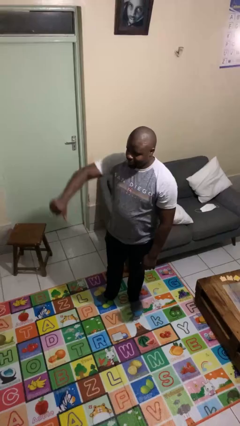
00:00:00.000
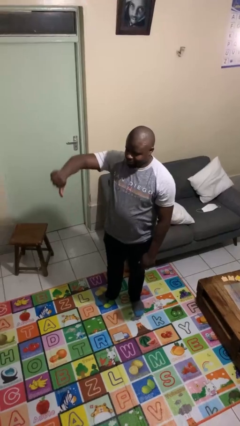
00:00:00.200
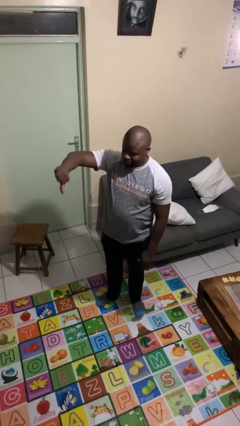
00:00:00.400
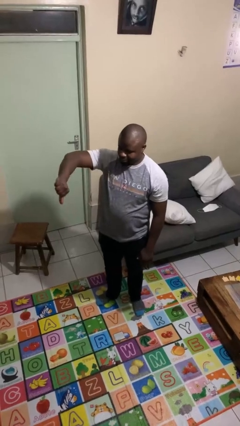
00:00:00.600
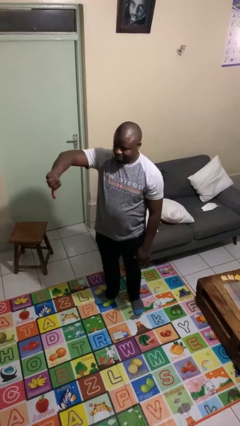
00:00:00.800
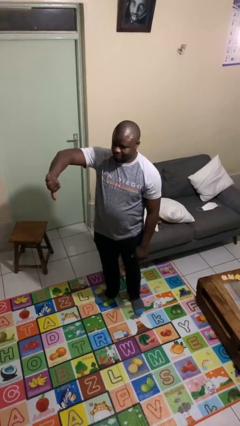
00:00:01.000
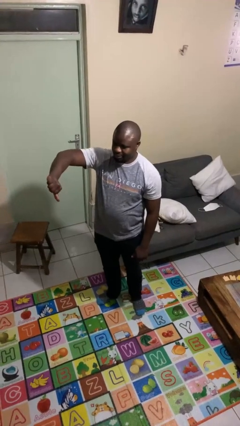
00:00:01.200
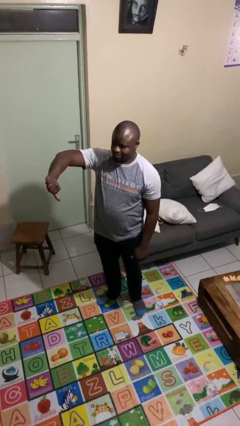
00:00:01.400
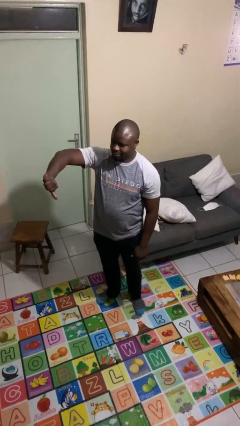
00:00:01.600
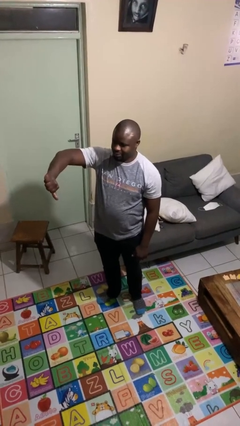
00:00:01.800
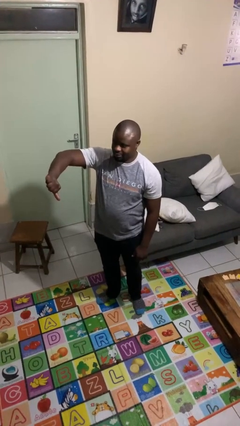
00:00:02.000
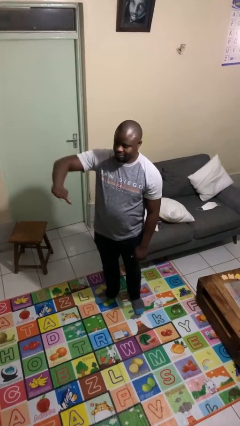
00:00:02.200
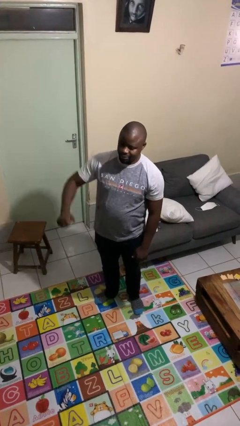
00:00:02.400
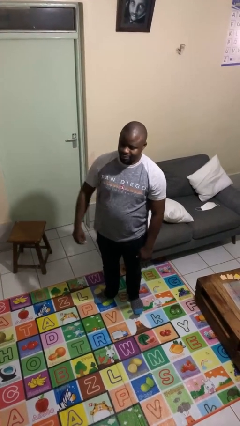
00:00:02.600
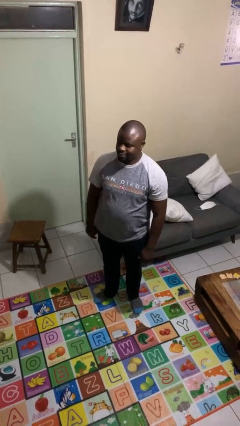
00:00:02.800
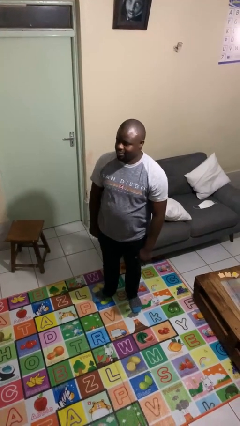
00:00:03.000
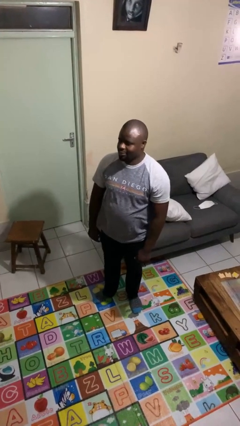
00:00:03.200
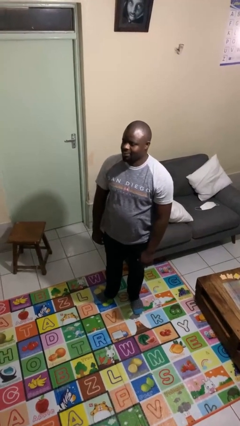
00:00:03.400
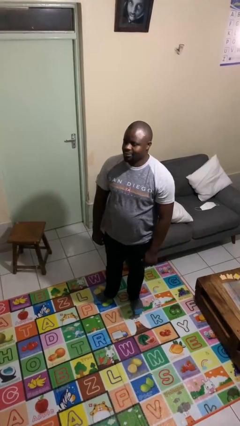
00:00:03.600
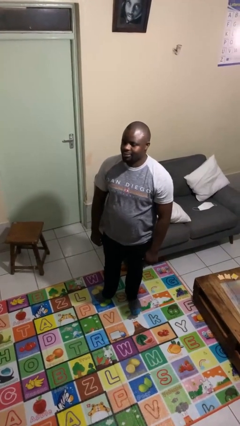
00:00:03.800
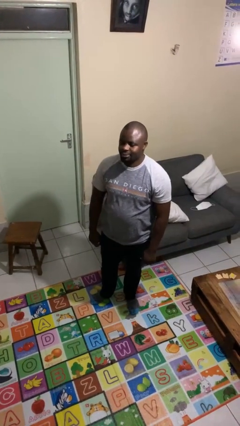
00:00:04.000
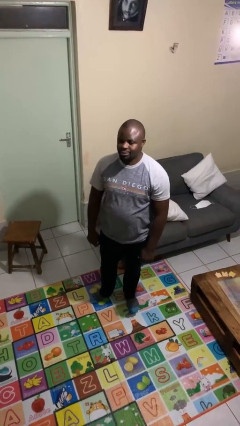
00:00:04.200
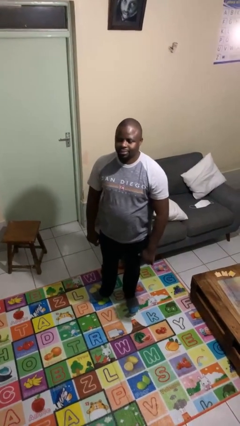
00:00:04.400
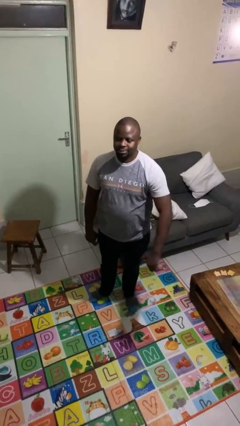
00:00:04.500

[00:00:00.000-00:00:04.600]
person gestures thumbs down

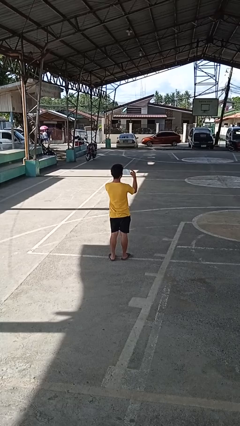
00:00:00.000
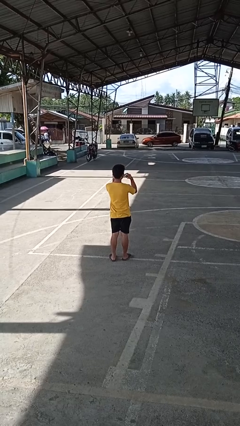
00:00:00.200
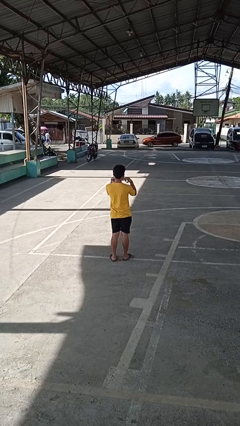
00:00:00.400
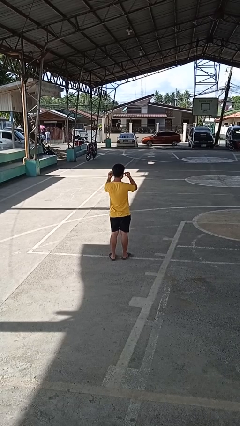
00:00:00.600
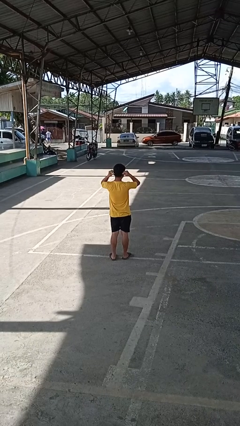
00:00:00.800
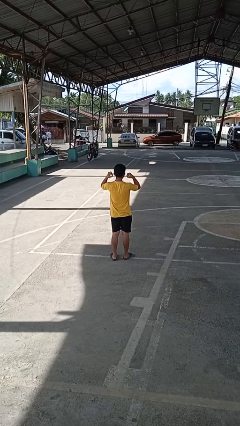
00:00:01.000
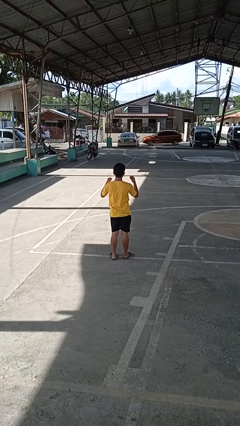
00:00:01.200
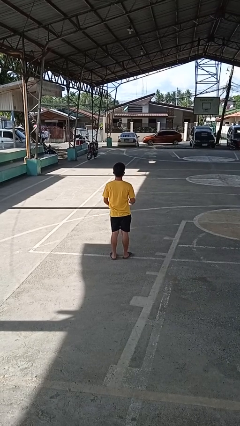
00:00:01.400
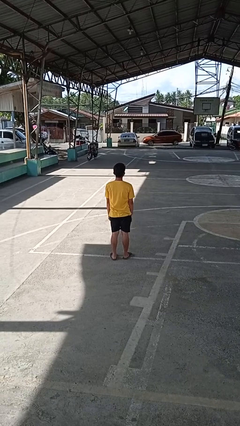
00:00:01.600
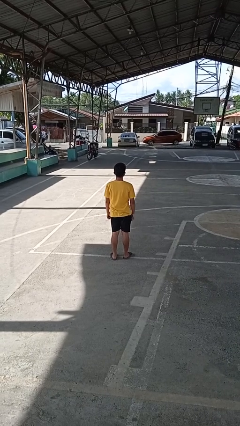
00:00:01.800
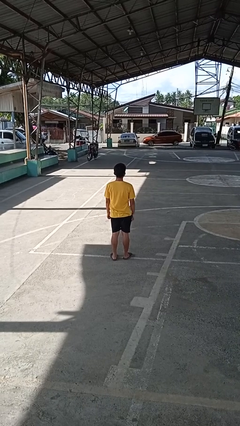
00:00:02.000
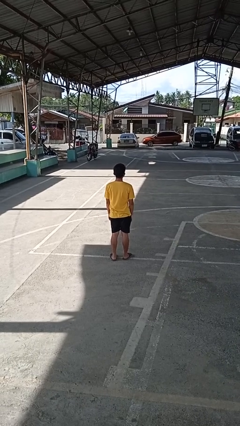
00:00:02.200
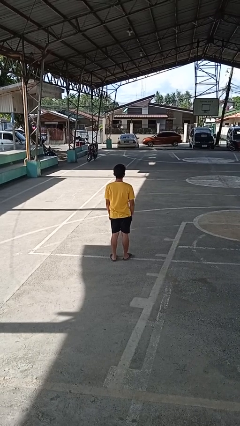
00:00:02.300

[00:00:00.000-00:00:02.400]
person puts on facemask

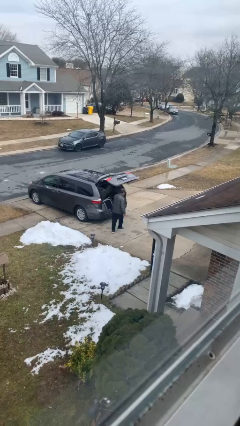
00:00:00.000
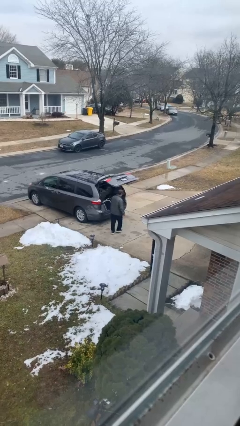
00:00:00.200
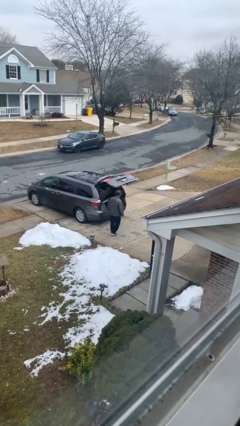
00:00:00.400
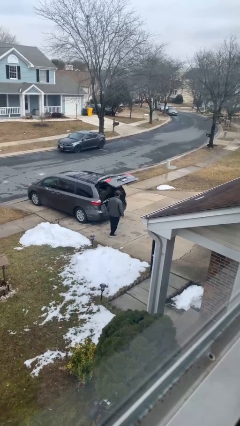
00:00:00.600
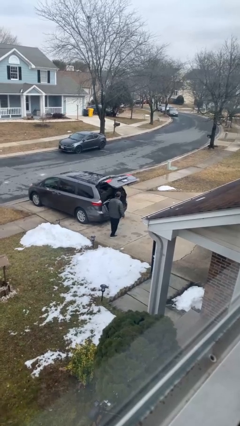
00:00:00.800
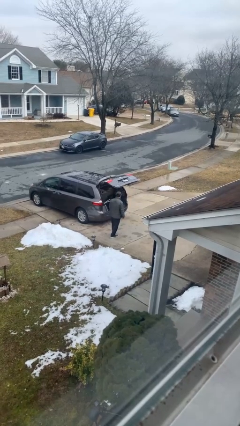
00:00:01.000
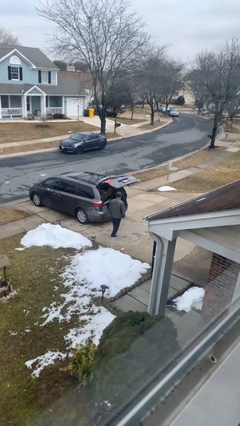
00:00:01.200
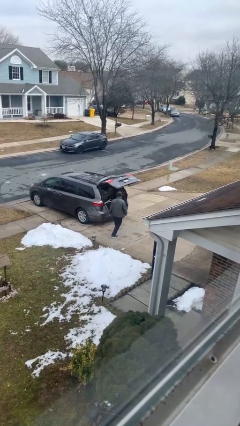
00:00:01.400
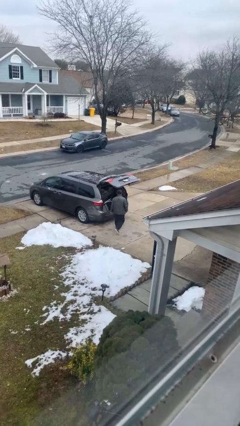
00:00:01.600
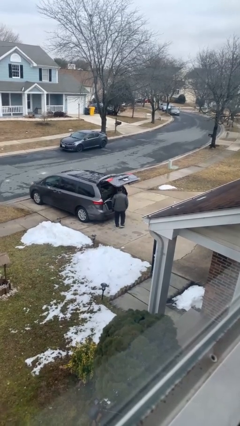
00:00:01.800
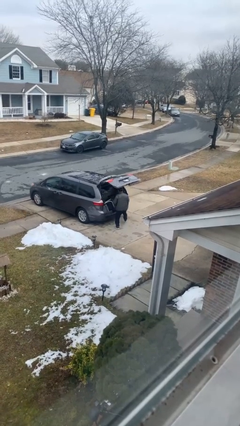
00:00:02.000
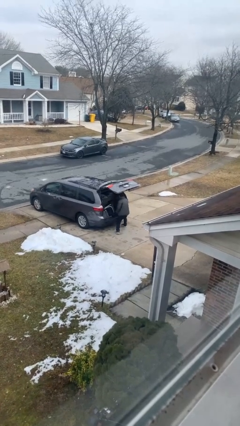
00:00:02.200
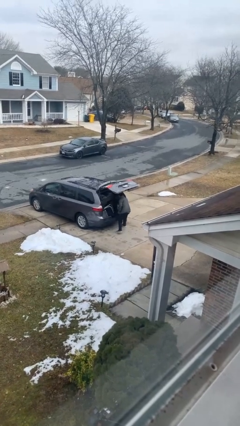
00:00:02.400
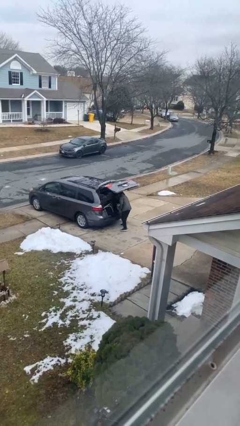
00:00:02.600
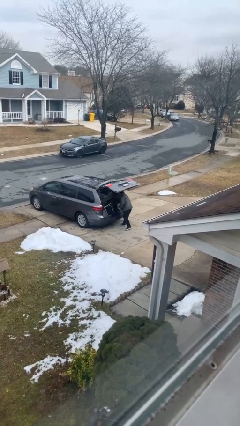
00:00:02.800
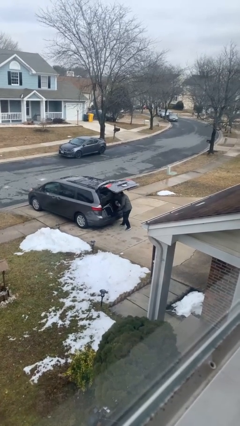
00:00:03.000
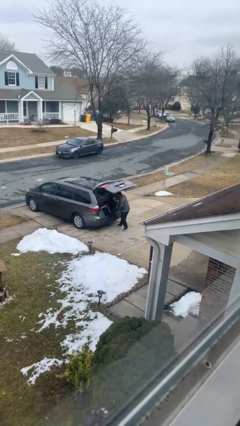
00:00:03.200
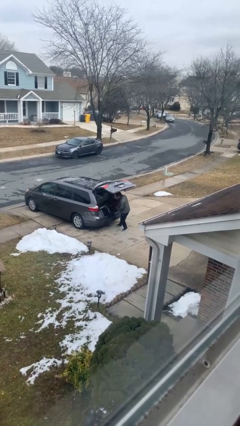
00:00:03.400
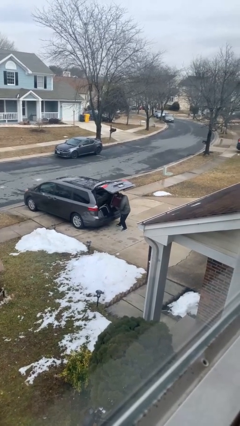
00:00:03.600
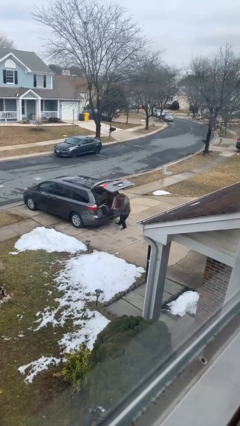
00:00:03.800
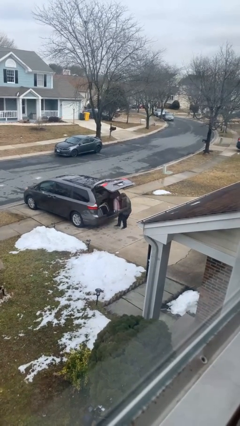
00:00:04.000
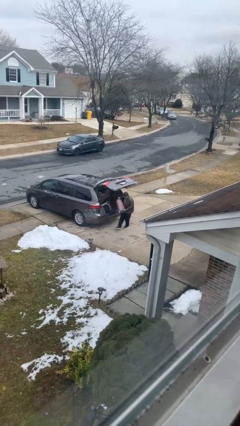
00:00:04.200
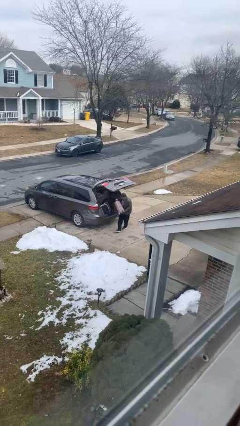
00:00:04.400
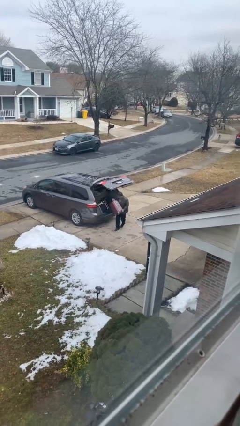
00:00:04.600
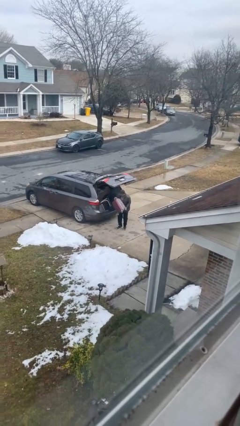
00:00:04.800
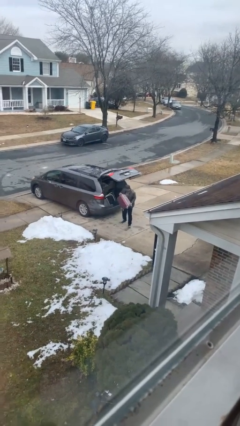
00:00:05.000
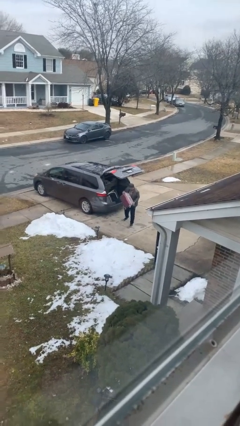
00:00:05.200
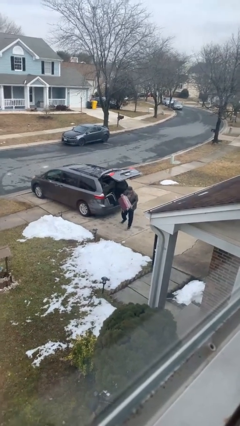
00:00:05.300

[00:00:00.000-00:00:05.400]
person unloads car

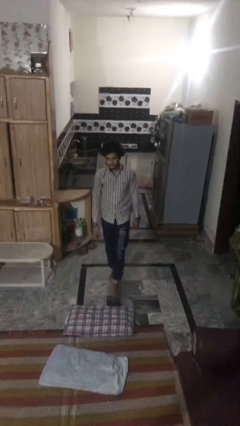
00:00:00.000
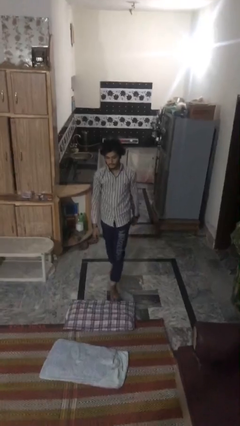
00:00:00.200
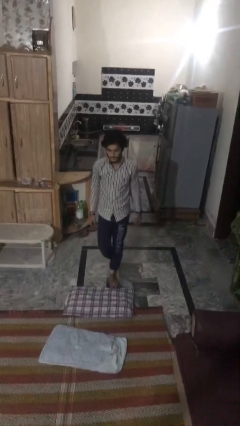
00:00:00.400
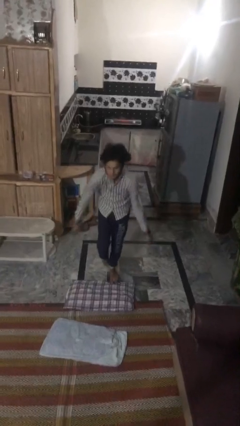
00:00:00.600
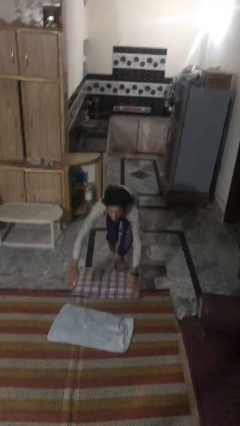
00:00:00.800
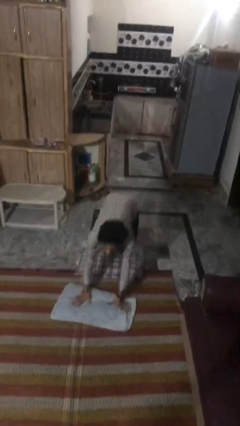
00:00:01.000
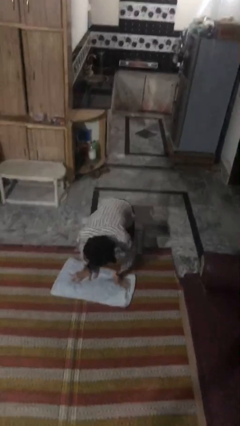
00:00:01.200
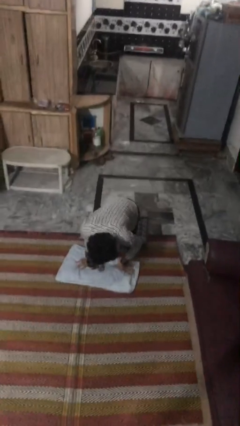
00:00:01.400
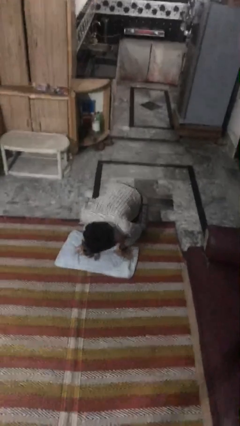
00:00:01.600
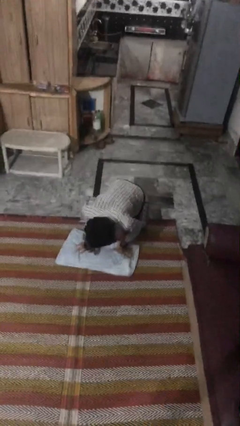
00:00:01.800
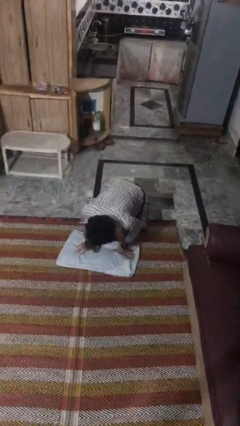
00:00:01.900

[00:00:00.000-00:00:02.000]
person trips on object on floor

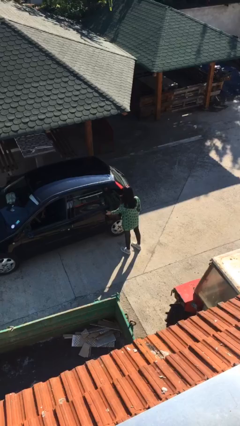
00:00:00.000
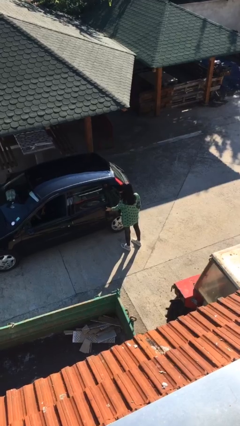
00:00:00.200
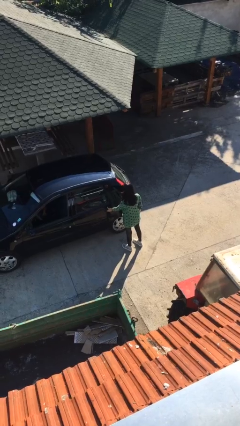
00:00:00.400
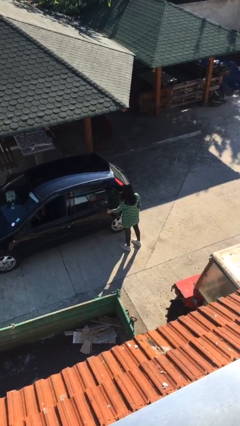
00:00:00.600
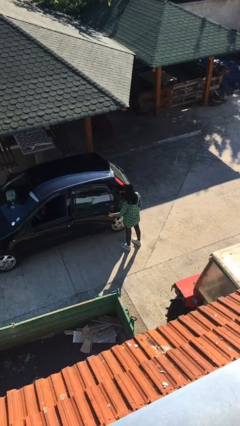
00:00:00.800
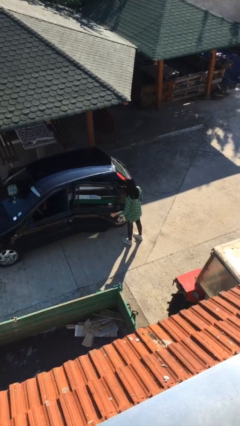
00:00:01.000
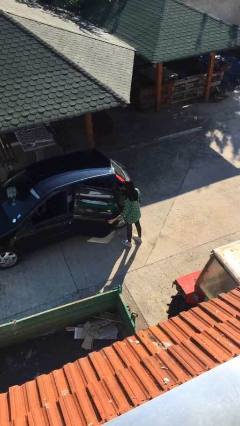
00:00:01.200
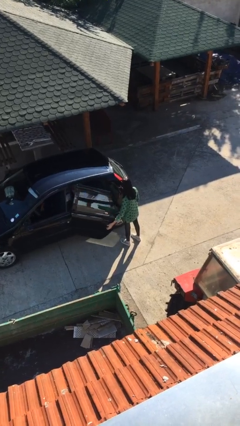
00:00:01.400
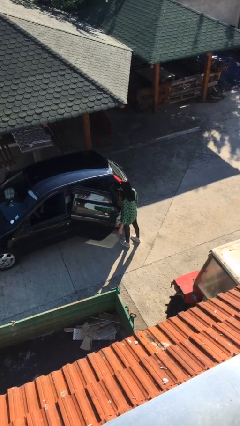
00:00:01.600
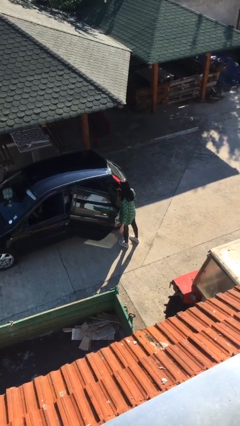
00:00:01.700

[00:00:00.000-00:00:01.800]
person opens car door

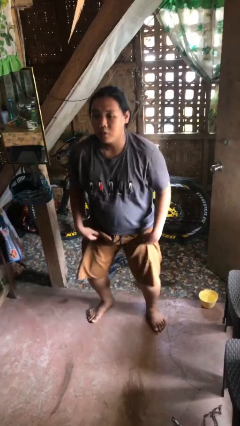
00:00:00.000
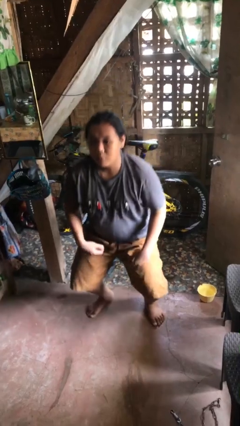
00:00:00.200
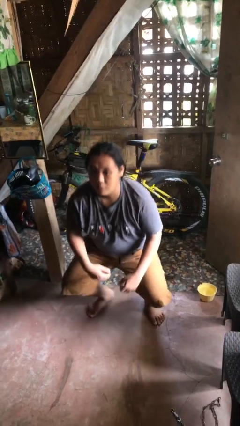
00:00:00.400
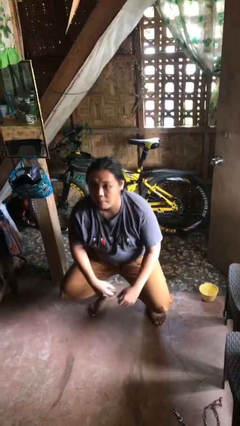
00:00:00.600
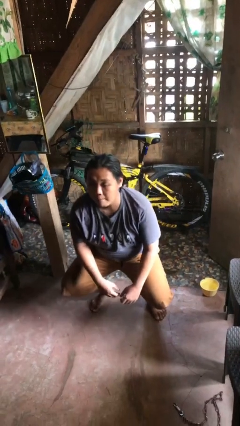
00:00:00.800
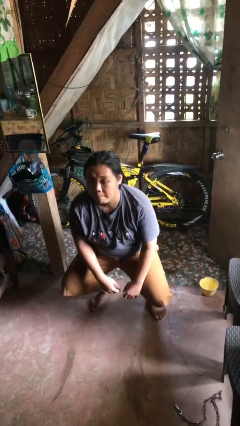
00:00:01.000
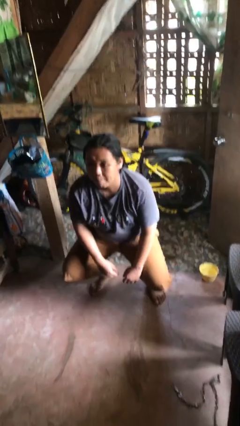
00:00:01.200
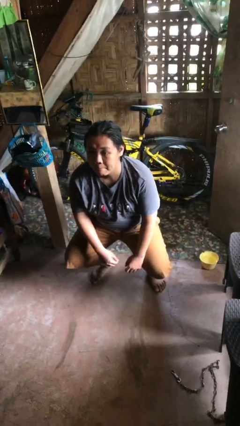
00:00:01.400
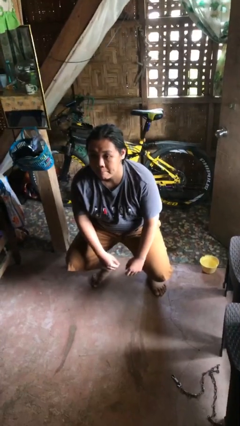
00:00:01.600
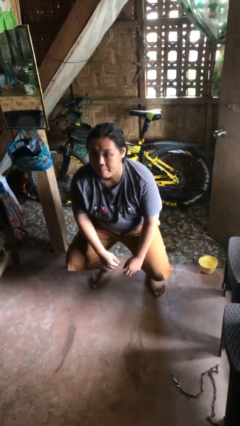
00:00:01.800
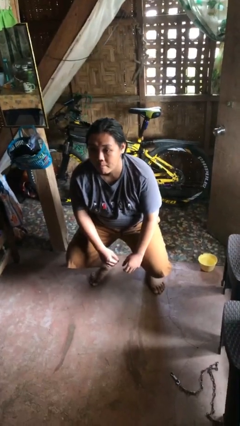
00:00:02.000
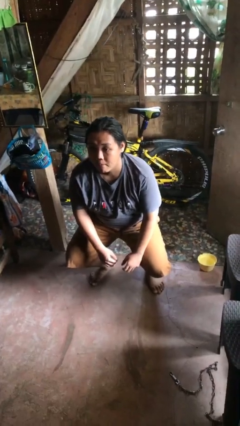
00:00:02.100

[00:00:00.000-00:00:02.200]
person squats
